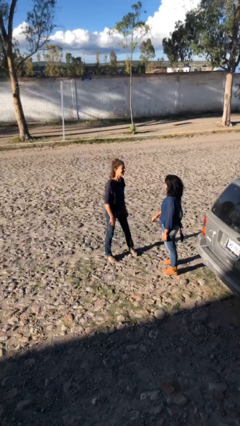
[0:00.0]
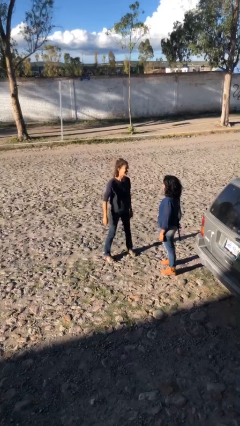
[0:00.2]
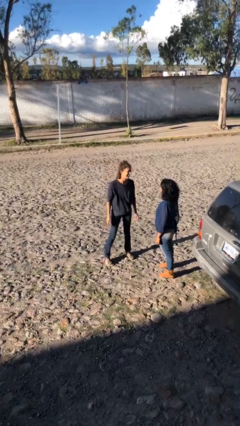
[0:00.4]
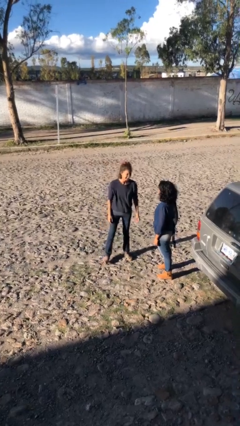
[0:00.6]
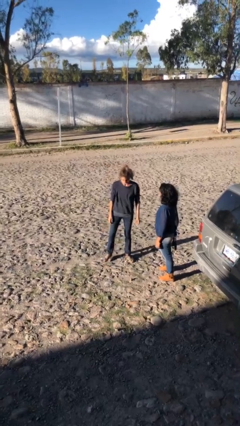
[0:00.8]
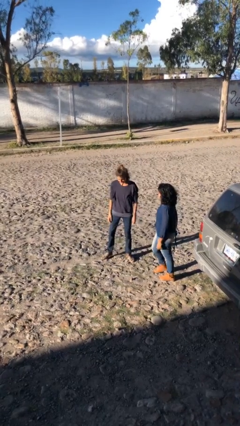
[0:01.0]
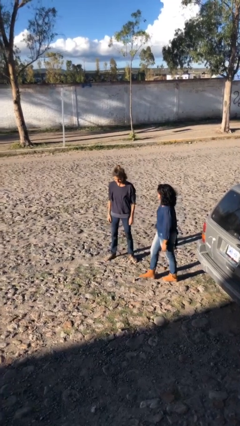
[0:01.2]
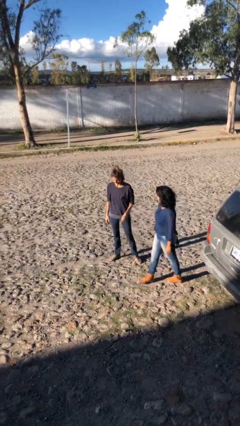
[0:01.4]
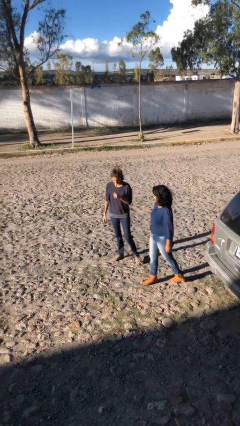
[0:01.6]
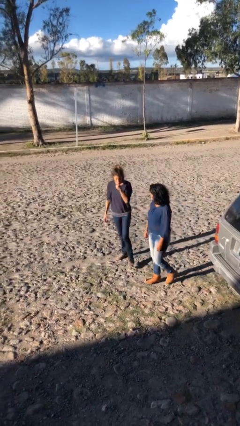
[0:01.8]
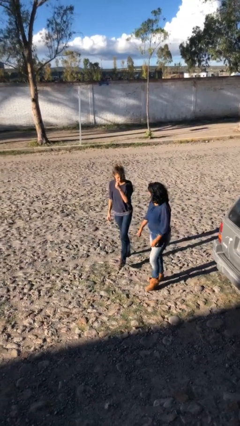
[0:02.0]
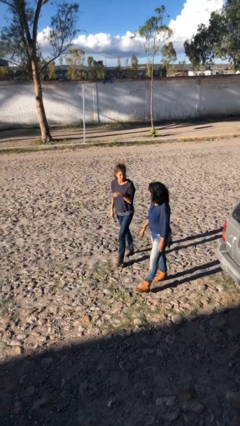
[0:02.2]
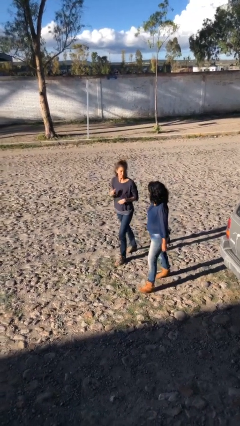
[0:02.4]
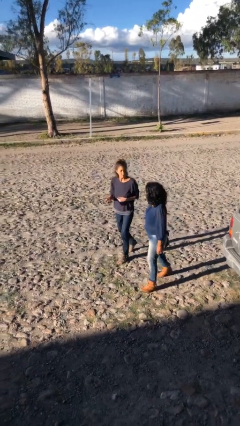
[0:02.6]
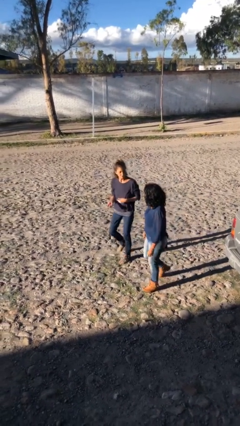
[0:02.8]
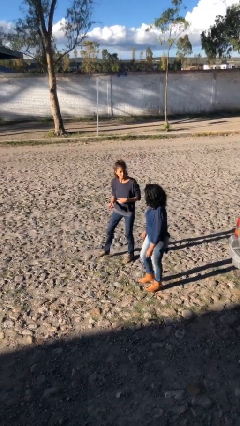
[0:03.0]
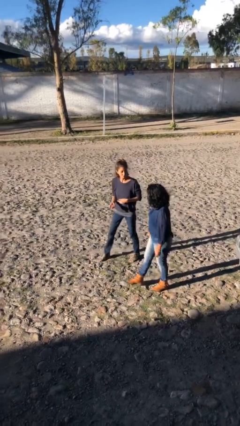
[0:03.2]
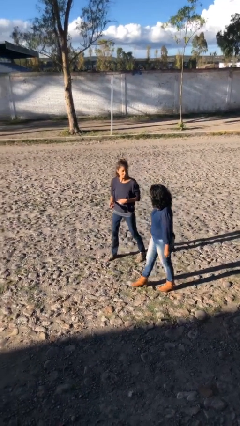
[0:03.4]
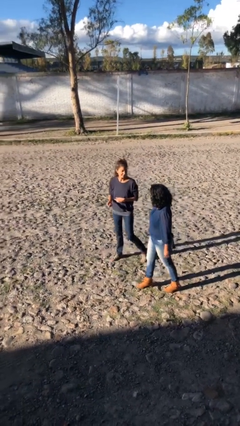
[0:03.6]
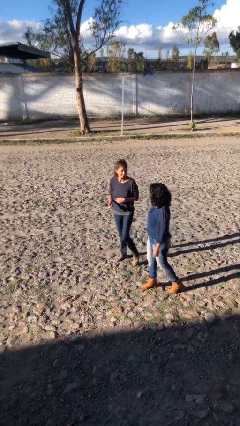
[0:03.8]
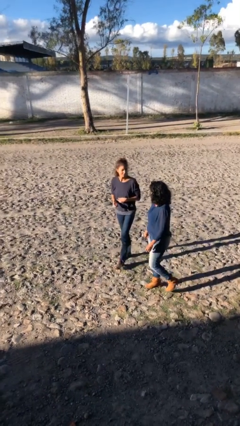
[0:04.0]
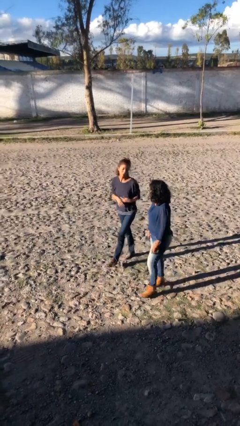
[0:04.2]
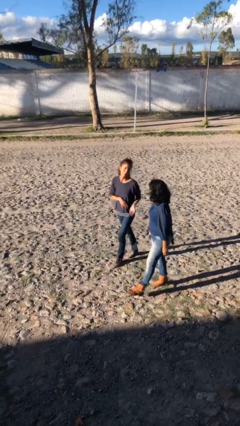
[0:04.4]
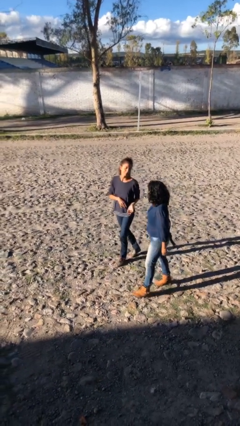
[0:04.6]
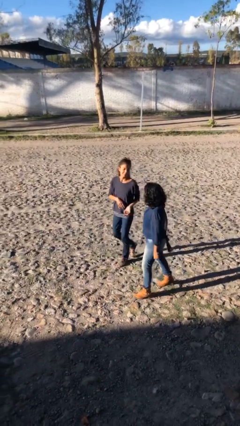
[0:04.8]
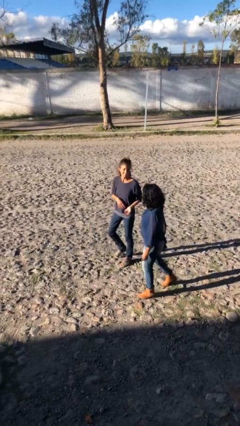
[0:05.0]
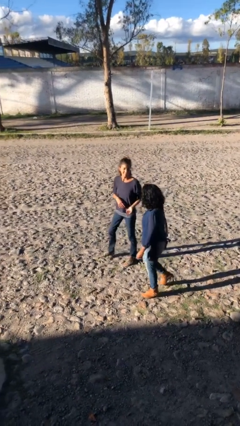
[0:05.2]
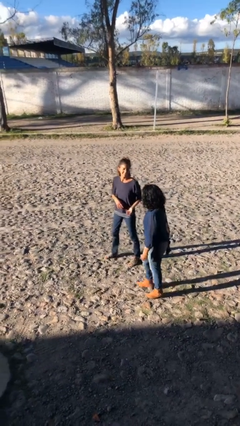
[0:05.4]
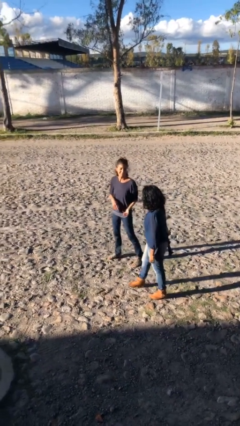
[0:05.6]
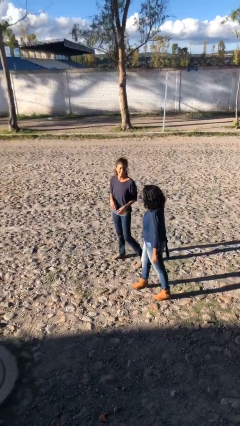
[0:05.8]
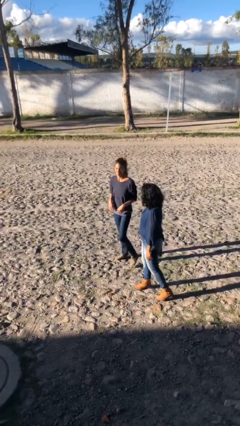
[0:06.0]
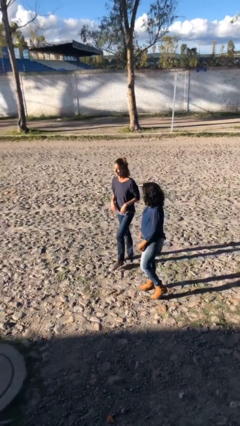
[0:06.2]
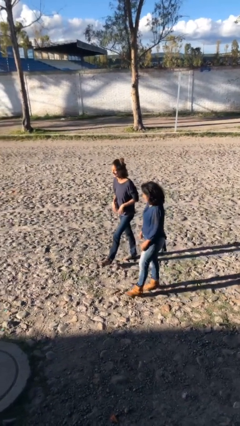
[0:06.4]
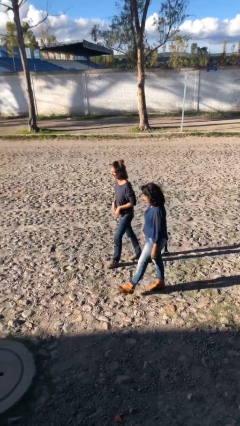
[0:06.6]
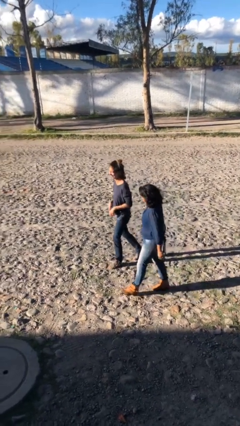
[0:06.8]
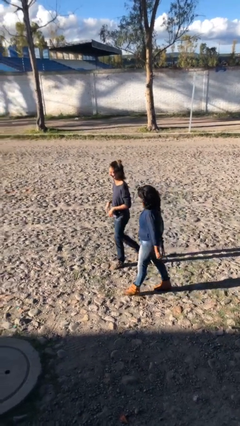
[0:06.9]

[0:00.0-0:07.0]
person talks to person

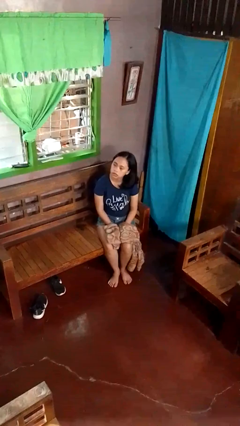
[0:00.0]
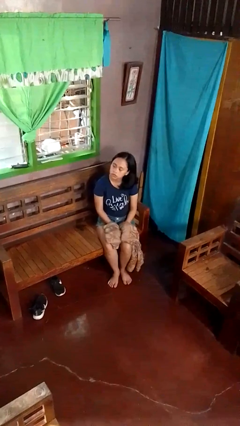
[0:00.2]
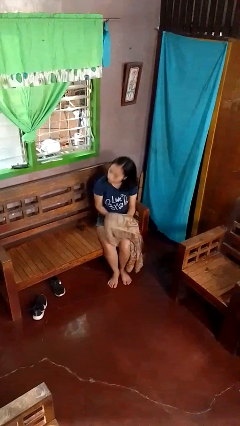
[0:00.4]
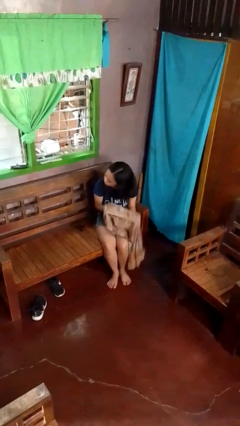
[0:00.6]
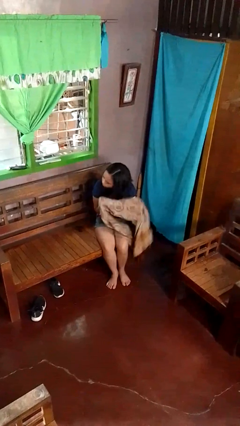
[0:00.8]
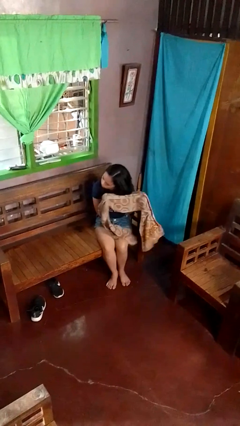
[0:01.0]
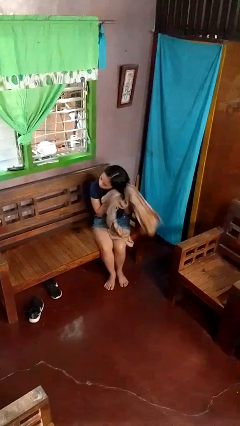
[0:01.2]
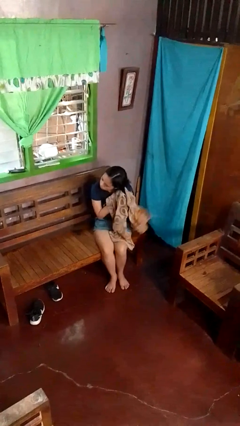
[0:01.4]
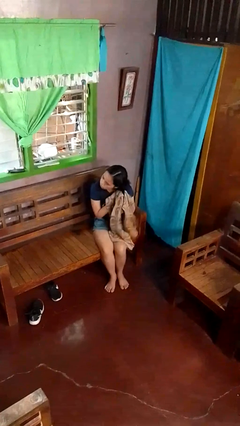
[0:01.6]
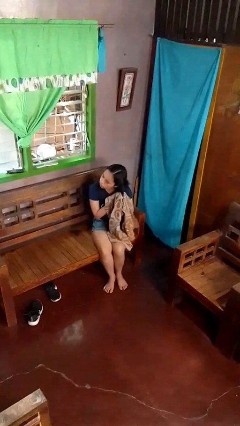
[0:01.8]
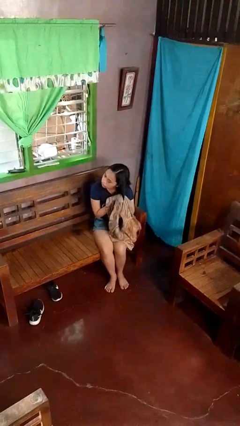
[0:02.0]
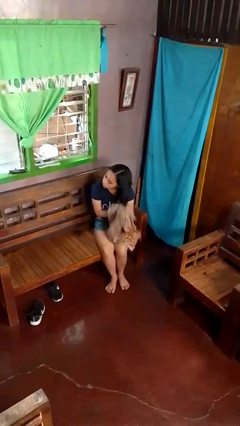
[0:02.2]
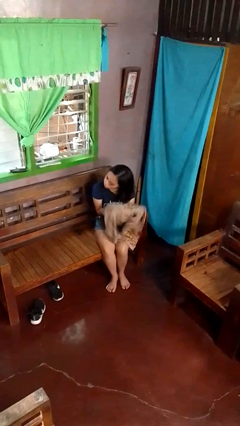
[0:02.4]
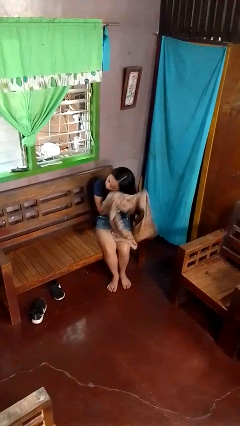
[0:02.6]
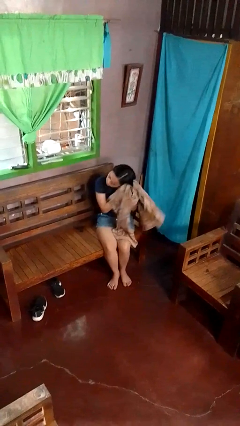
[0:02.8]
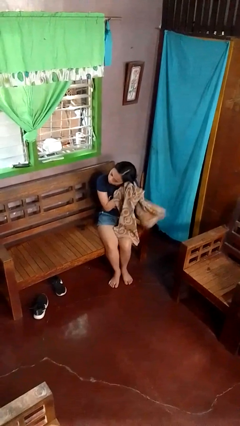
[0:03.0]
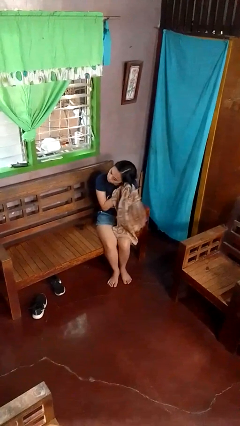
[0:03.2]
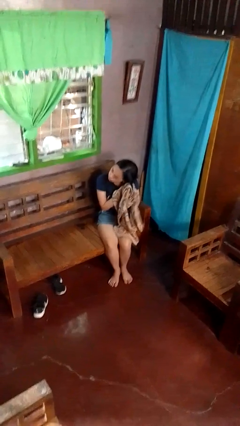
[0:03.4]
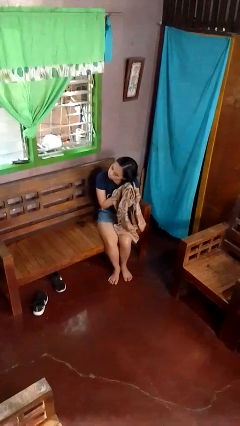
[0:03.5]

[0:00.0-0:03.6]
person dries hair with towel

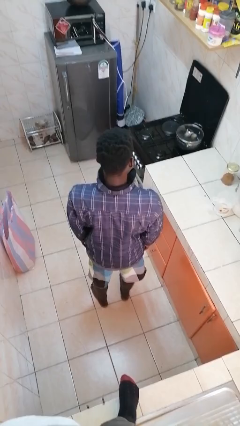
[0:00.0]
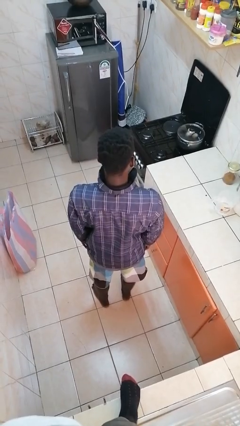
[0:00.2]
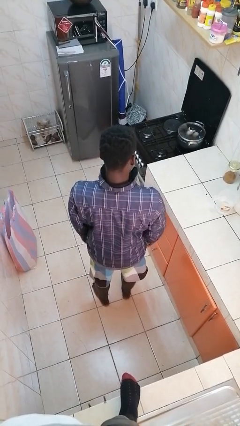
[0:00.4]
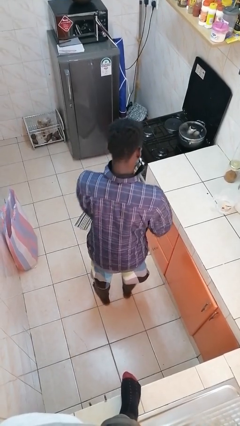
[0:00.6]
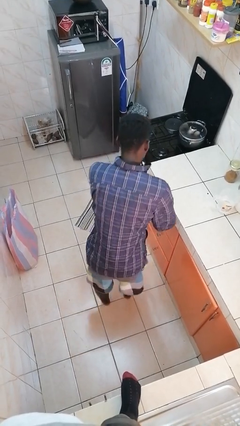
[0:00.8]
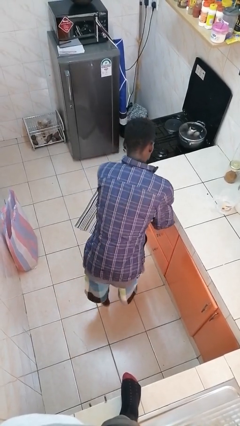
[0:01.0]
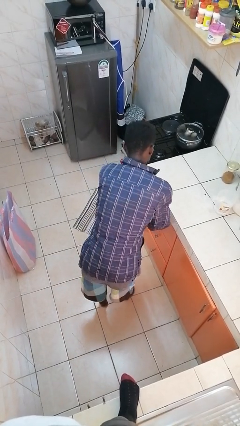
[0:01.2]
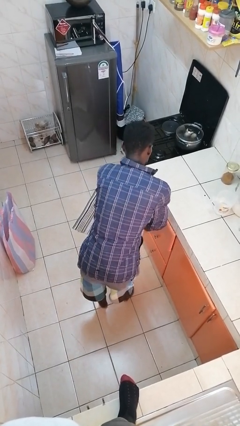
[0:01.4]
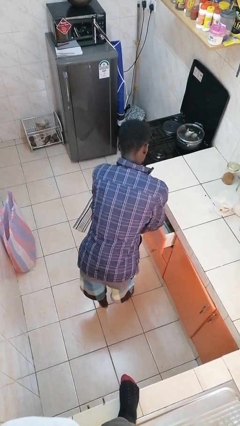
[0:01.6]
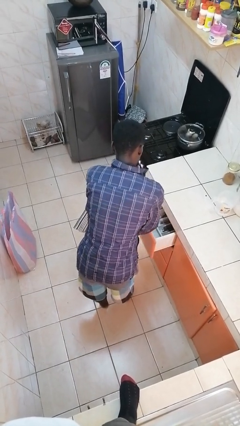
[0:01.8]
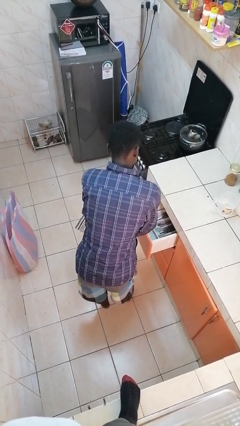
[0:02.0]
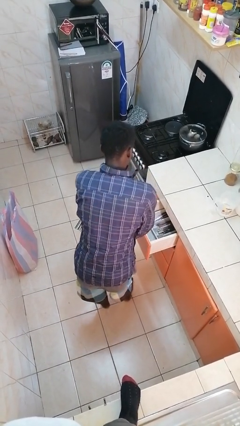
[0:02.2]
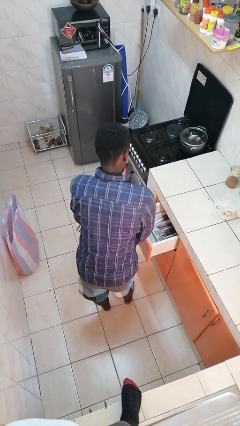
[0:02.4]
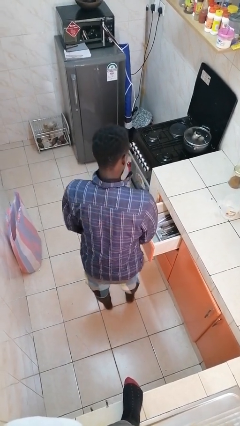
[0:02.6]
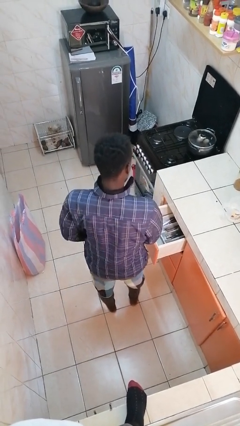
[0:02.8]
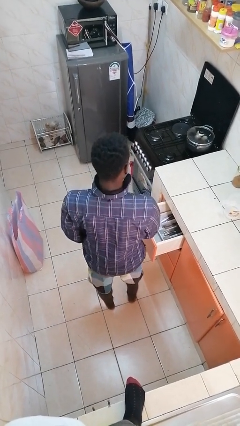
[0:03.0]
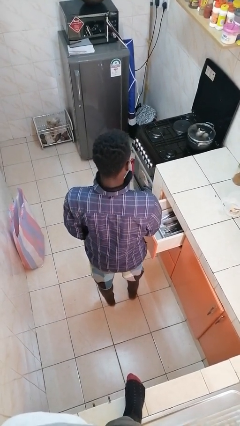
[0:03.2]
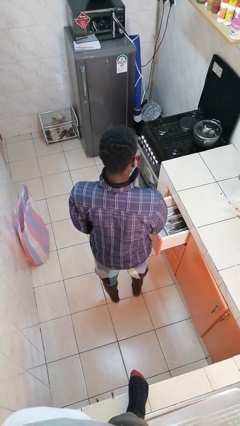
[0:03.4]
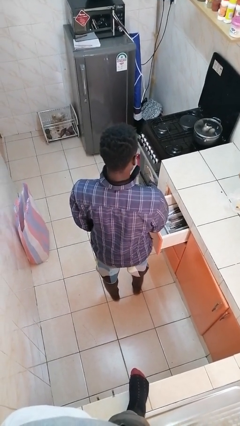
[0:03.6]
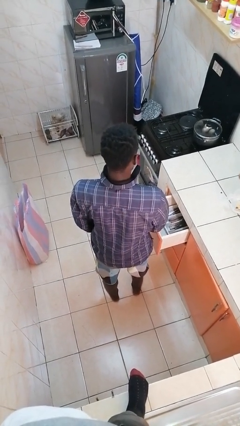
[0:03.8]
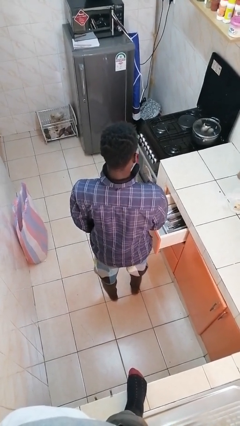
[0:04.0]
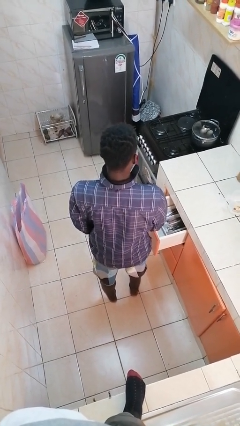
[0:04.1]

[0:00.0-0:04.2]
person opens kitchen drawer

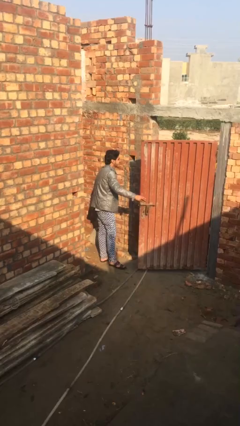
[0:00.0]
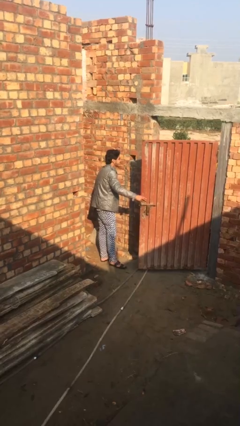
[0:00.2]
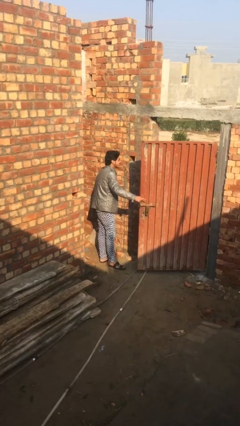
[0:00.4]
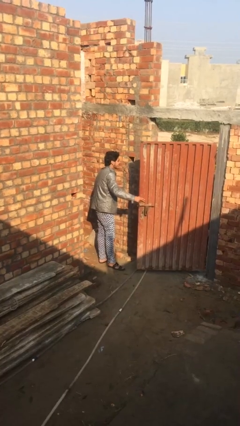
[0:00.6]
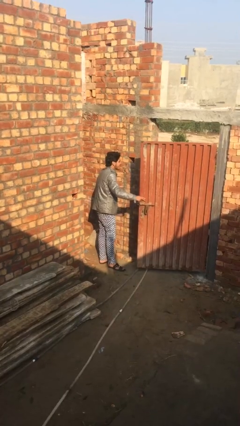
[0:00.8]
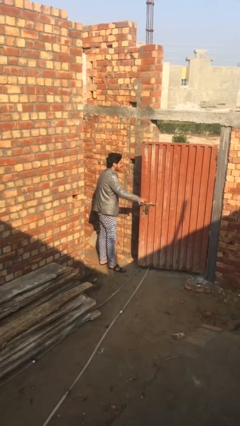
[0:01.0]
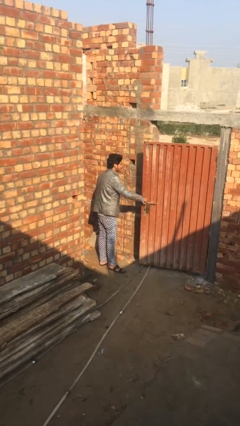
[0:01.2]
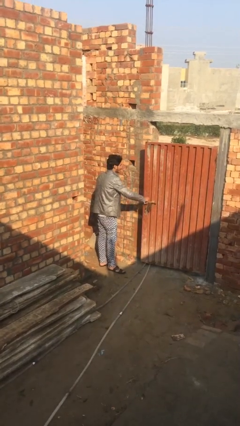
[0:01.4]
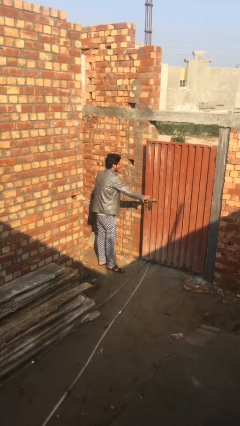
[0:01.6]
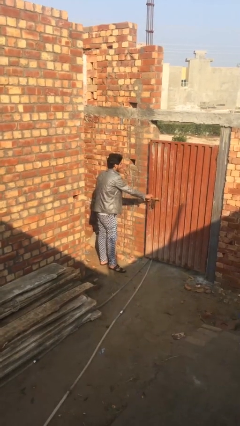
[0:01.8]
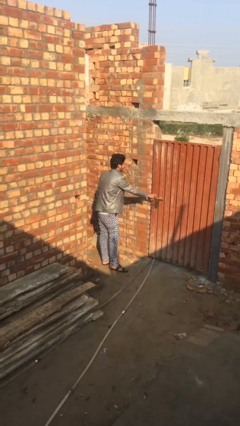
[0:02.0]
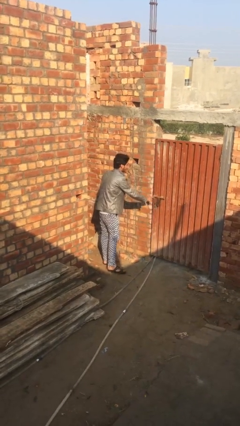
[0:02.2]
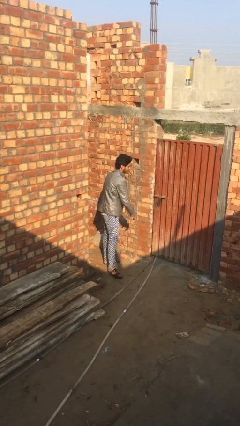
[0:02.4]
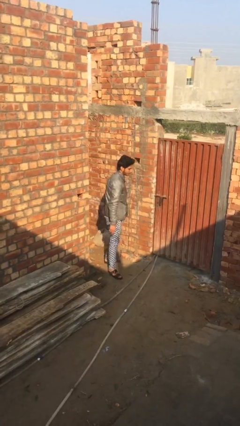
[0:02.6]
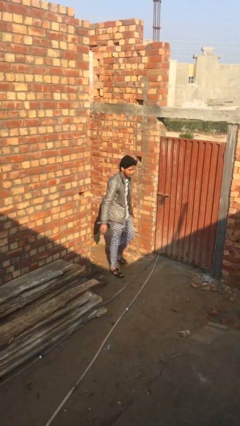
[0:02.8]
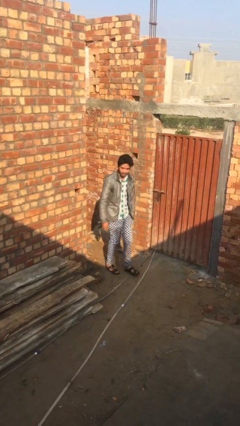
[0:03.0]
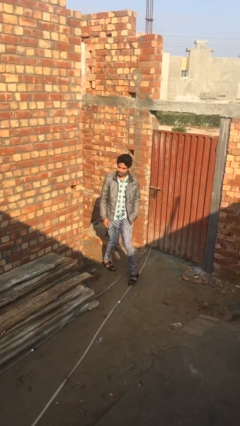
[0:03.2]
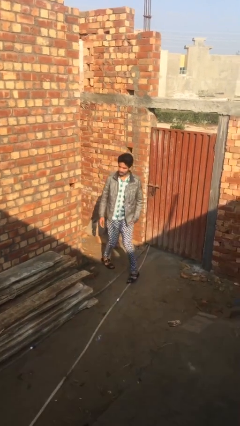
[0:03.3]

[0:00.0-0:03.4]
person closes facility door
